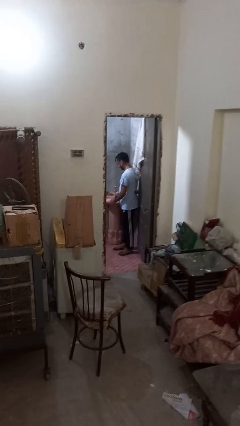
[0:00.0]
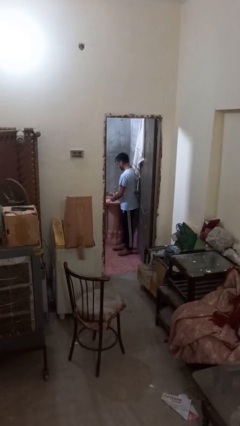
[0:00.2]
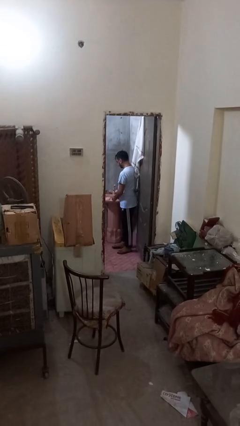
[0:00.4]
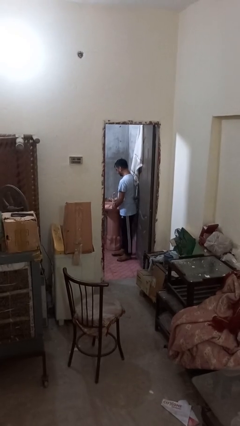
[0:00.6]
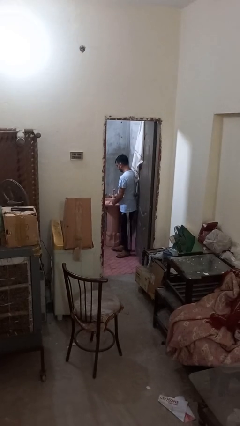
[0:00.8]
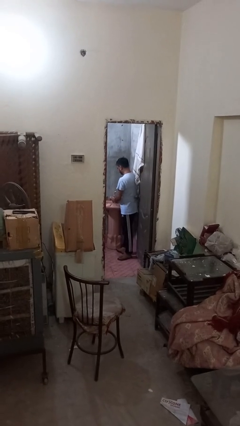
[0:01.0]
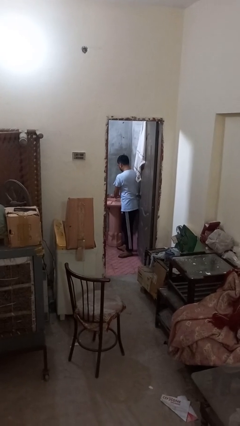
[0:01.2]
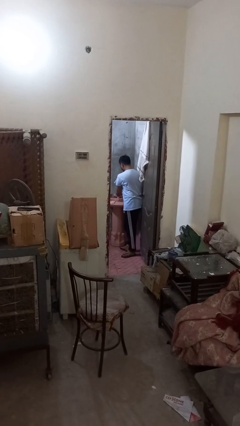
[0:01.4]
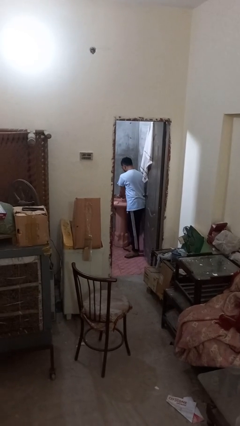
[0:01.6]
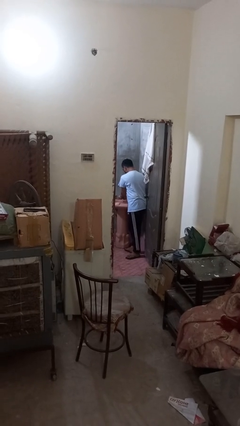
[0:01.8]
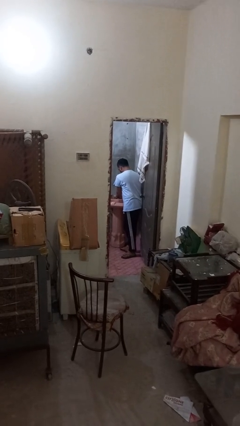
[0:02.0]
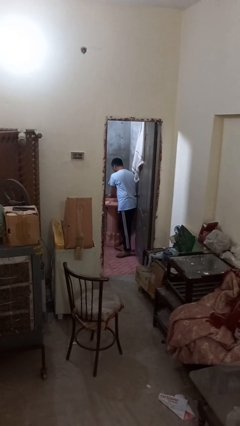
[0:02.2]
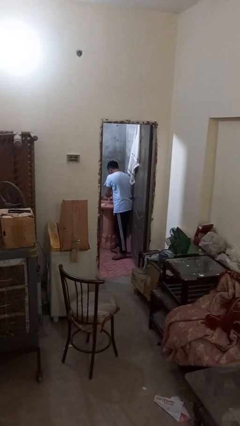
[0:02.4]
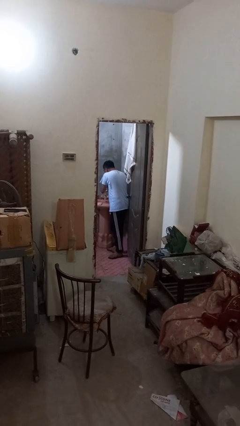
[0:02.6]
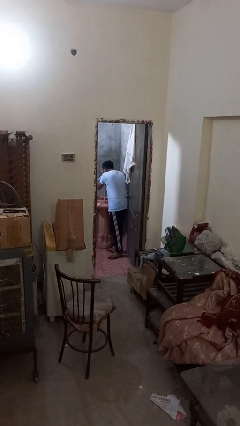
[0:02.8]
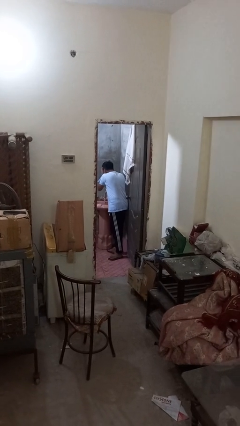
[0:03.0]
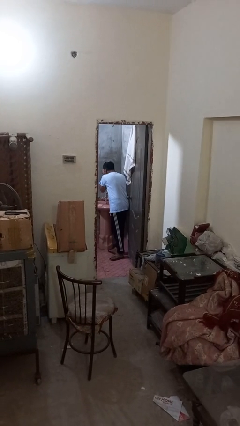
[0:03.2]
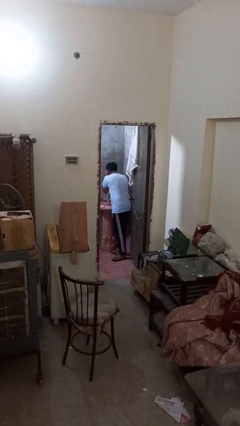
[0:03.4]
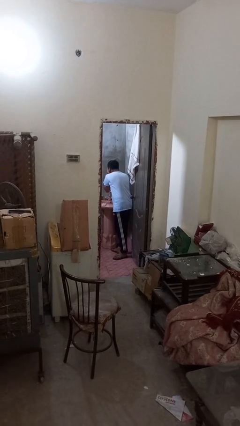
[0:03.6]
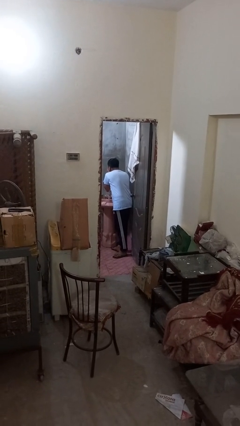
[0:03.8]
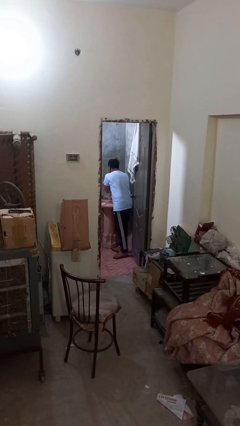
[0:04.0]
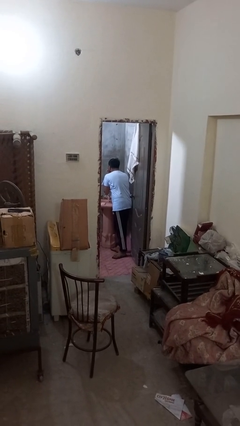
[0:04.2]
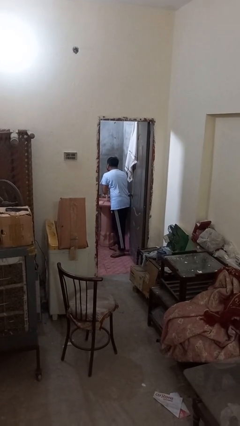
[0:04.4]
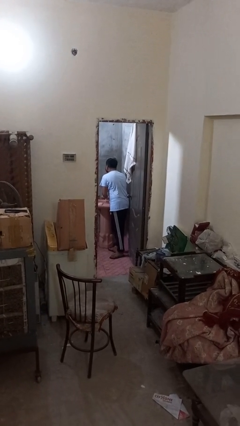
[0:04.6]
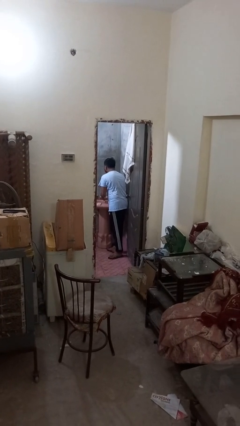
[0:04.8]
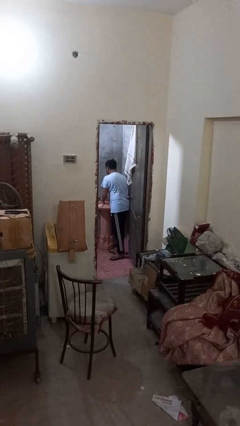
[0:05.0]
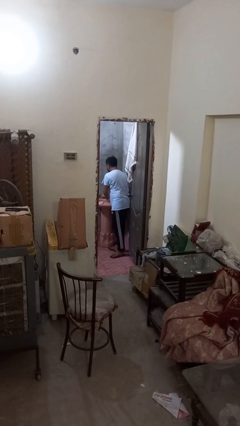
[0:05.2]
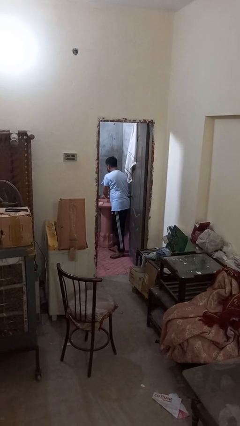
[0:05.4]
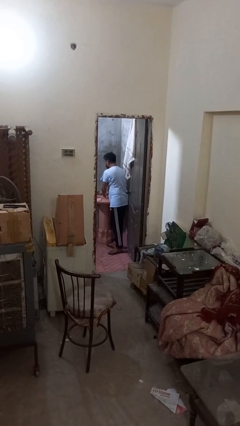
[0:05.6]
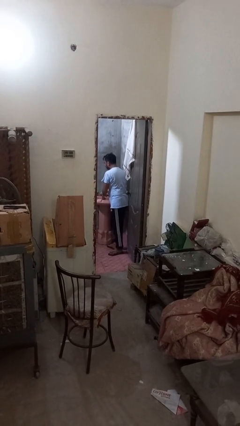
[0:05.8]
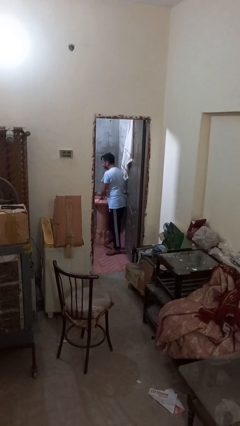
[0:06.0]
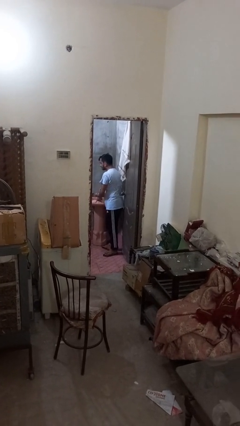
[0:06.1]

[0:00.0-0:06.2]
person washes face

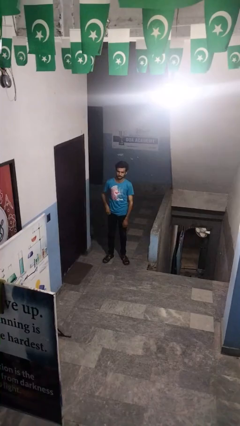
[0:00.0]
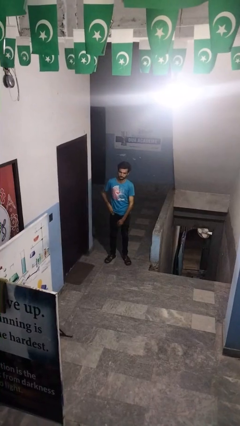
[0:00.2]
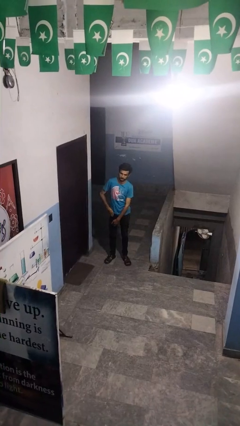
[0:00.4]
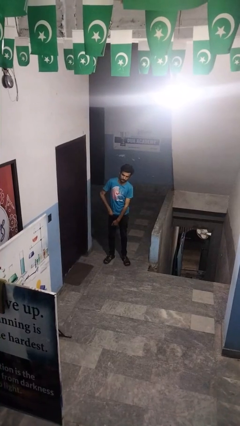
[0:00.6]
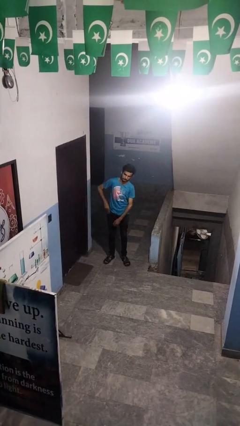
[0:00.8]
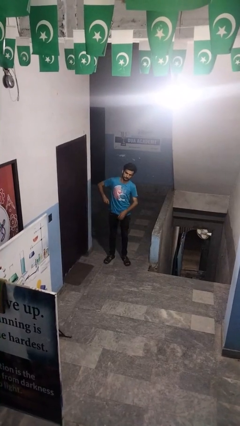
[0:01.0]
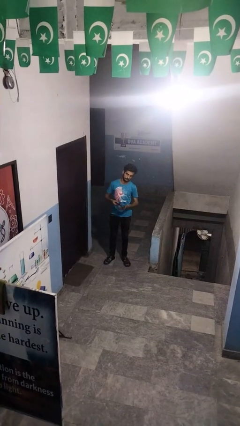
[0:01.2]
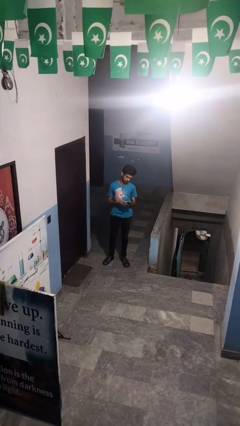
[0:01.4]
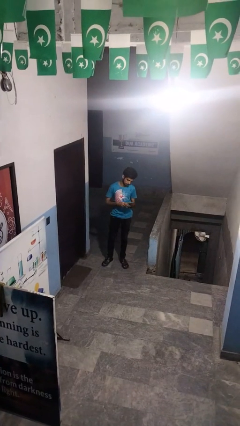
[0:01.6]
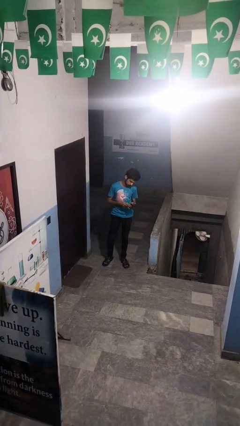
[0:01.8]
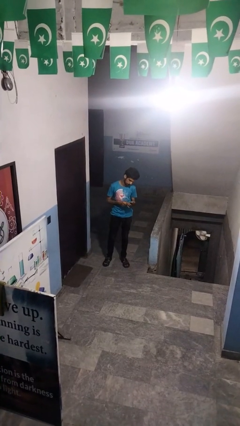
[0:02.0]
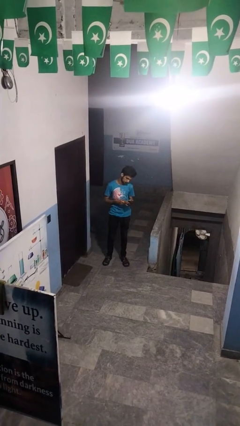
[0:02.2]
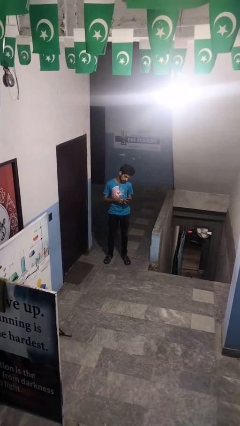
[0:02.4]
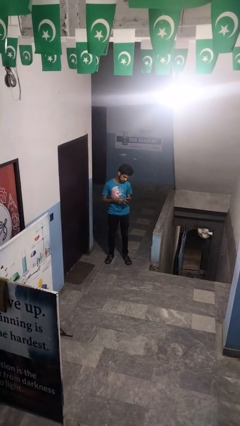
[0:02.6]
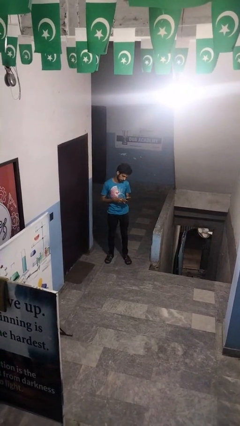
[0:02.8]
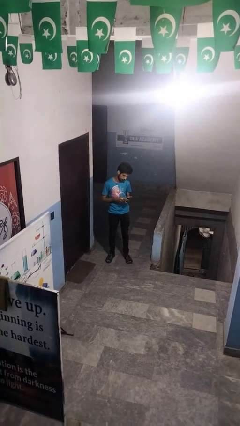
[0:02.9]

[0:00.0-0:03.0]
person takes phone from pocket

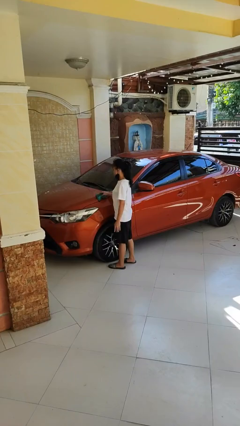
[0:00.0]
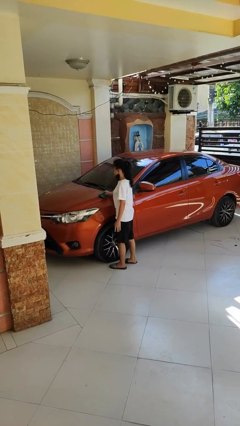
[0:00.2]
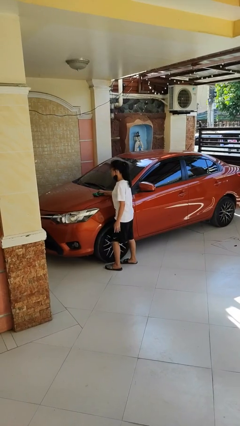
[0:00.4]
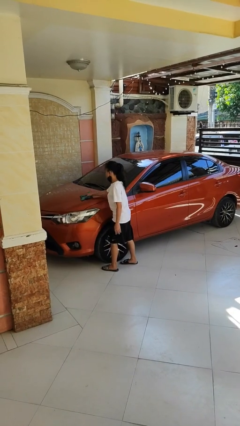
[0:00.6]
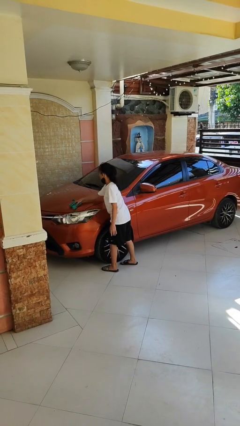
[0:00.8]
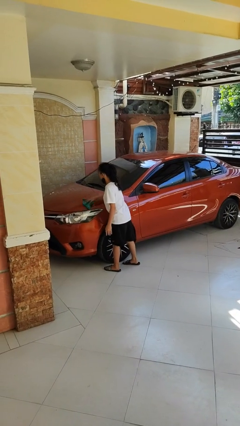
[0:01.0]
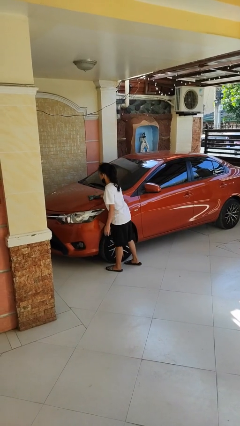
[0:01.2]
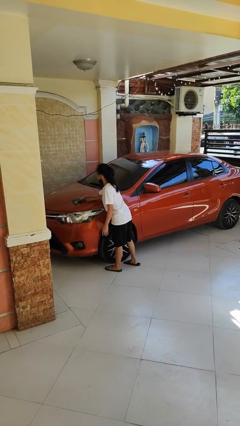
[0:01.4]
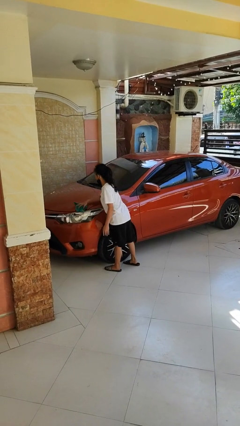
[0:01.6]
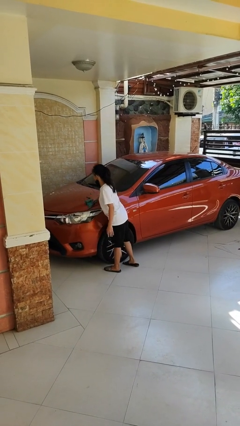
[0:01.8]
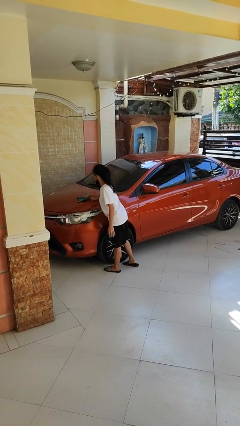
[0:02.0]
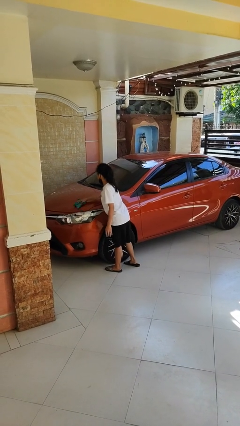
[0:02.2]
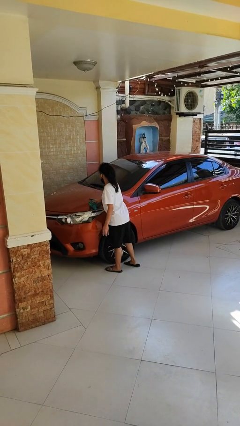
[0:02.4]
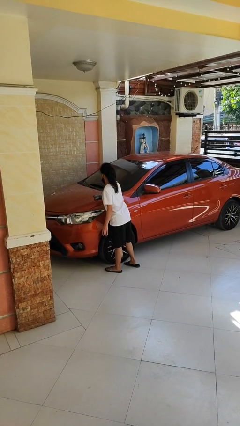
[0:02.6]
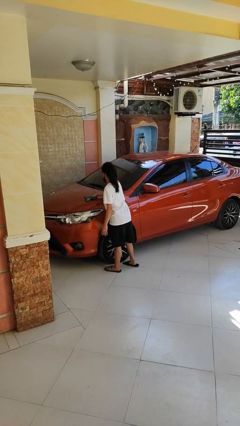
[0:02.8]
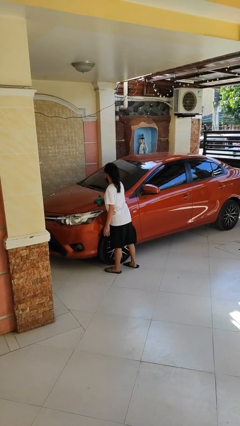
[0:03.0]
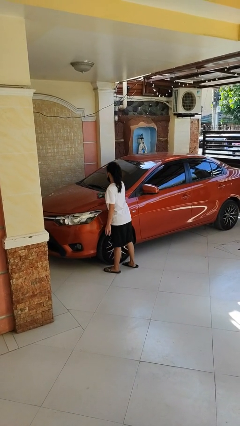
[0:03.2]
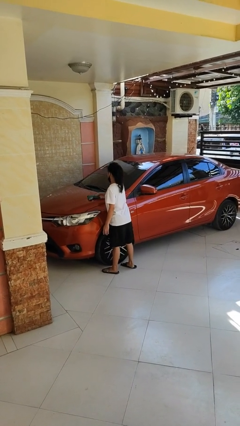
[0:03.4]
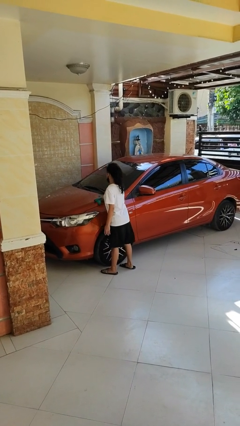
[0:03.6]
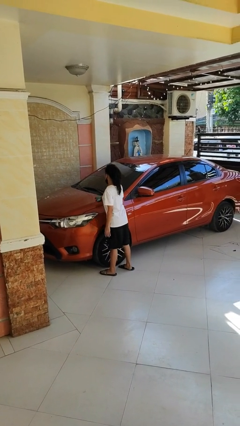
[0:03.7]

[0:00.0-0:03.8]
person polishes car with rag

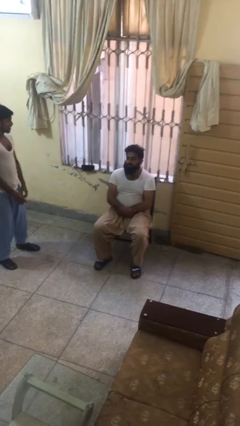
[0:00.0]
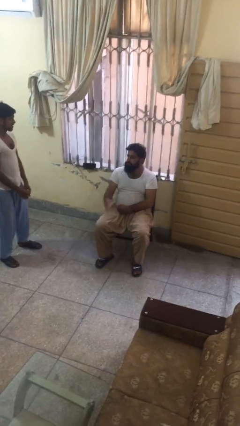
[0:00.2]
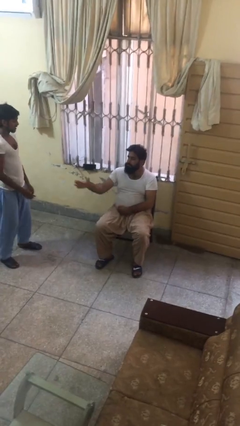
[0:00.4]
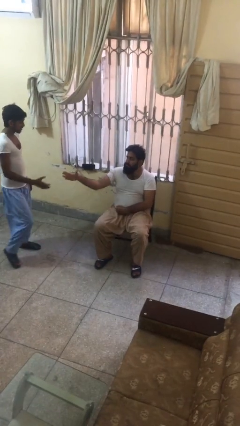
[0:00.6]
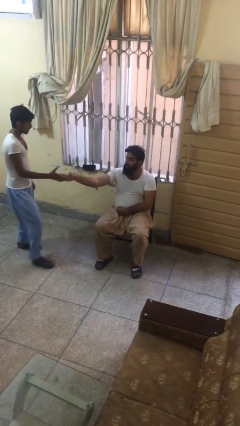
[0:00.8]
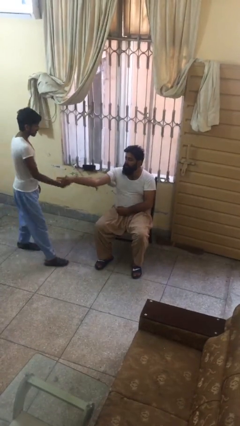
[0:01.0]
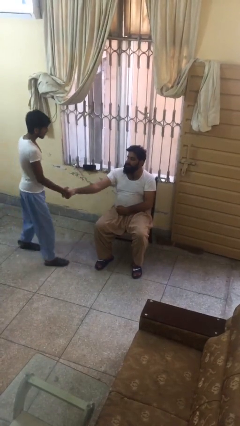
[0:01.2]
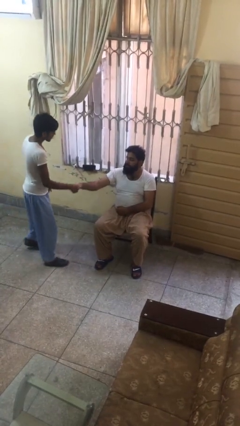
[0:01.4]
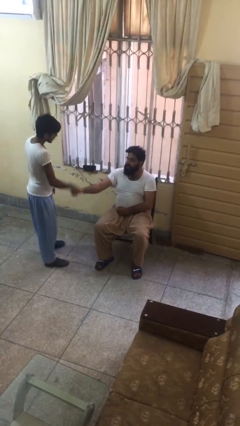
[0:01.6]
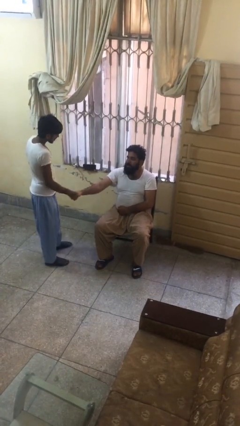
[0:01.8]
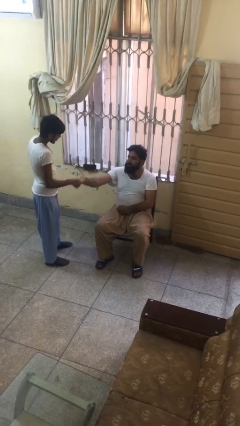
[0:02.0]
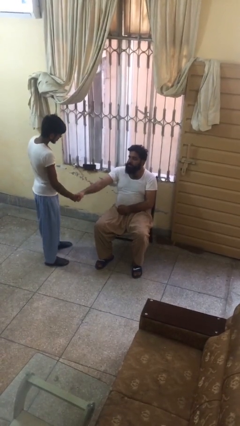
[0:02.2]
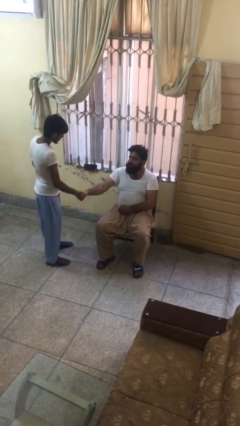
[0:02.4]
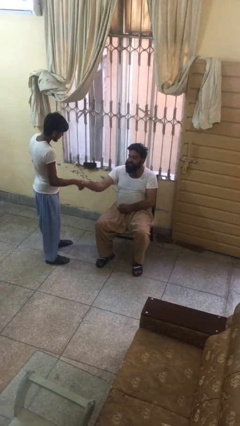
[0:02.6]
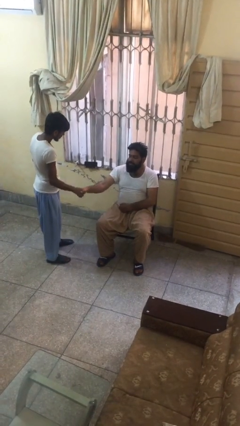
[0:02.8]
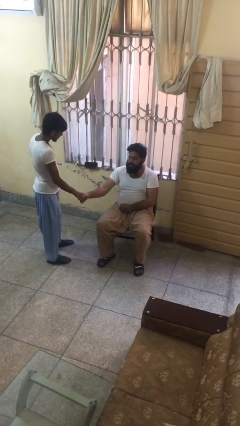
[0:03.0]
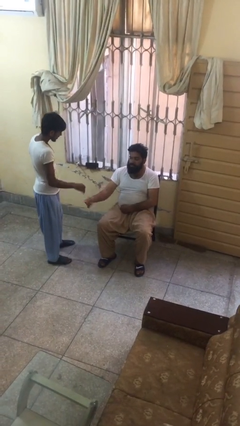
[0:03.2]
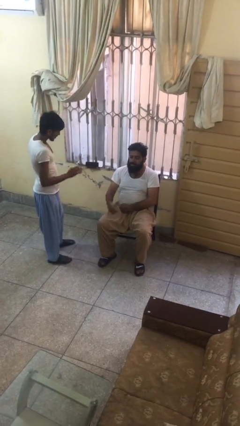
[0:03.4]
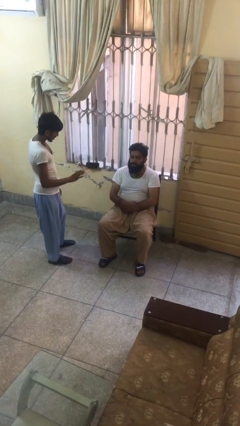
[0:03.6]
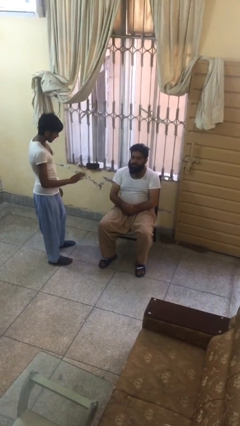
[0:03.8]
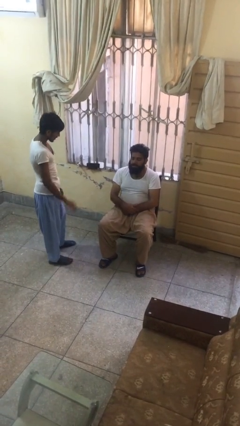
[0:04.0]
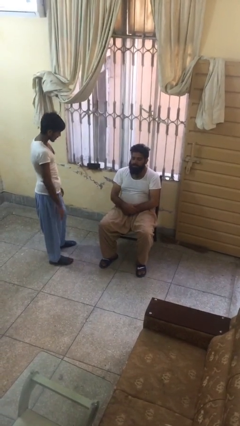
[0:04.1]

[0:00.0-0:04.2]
person shakes hand

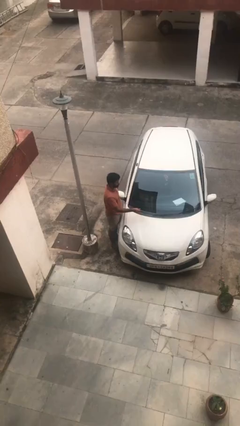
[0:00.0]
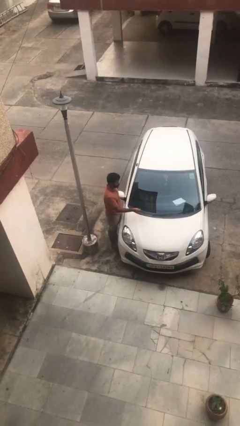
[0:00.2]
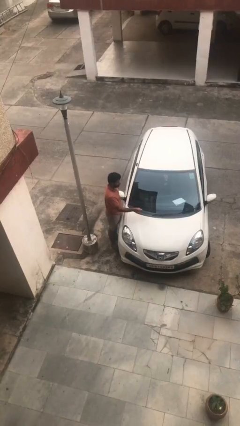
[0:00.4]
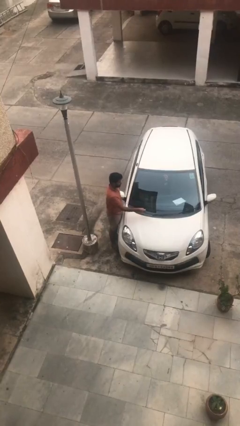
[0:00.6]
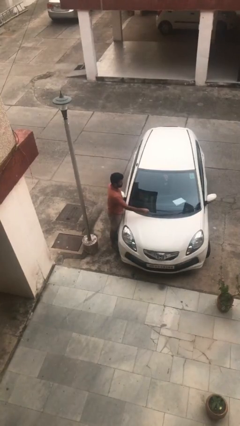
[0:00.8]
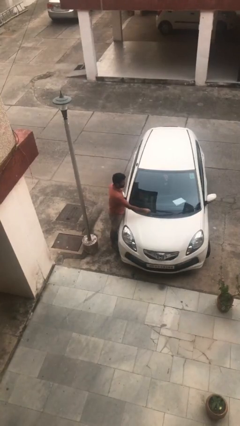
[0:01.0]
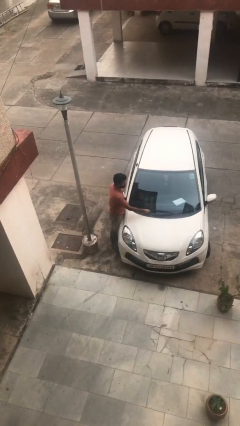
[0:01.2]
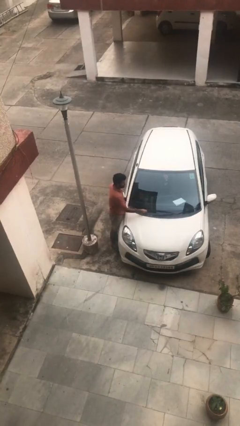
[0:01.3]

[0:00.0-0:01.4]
person flips down car wipers
